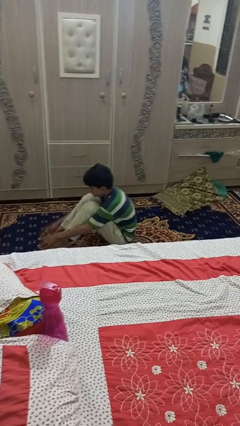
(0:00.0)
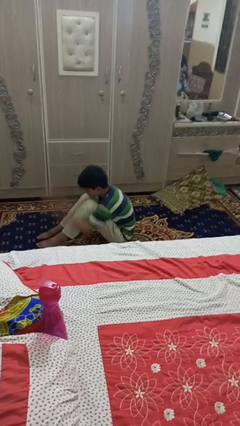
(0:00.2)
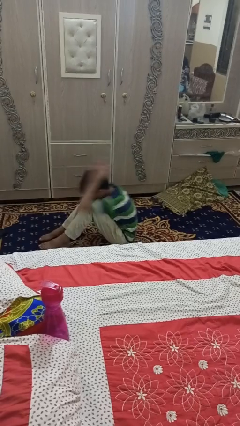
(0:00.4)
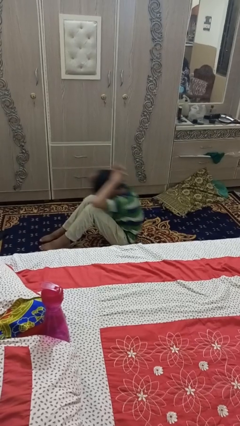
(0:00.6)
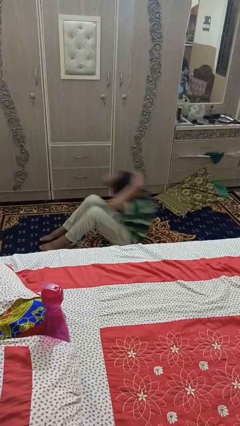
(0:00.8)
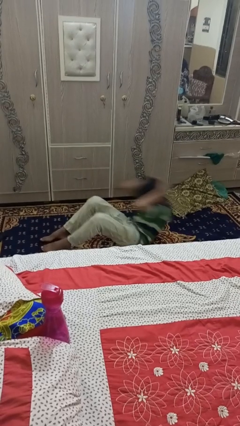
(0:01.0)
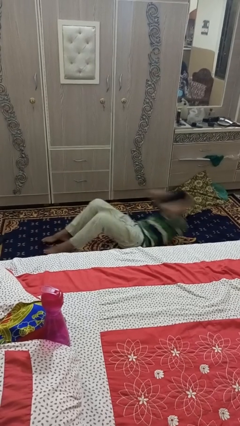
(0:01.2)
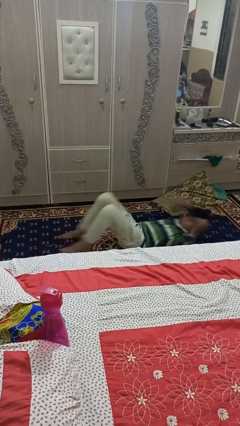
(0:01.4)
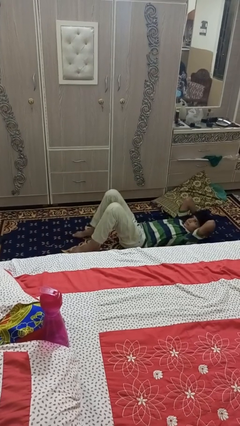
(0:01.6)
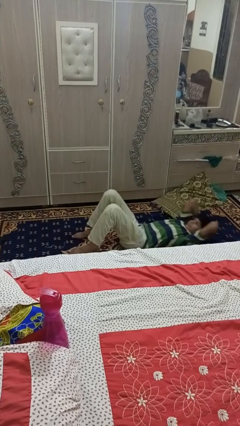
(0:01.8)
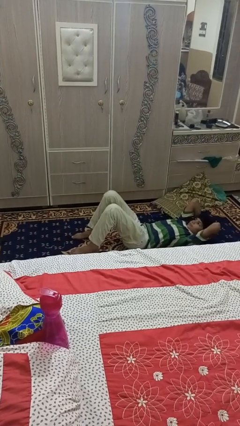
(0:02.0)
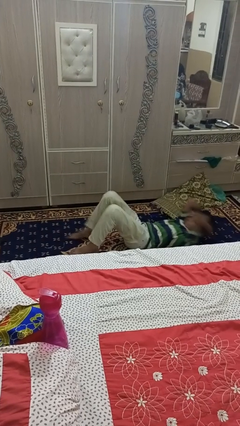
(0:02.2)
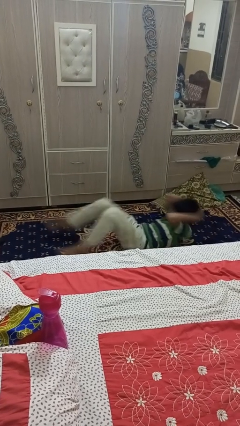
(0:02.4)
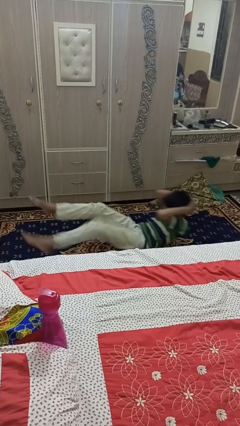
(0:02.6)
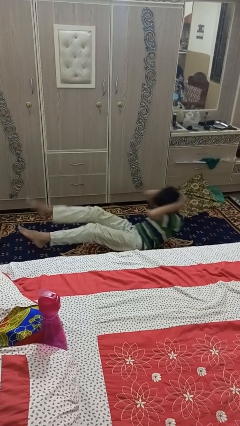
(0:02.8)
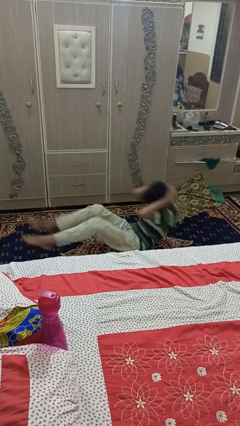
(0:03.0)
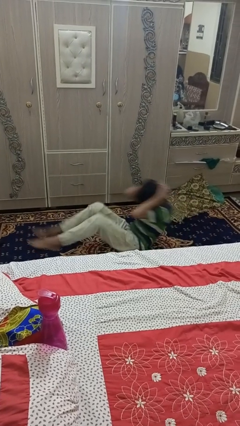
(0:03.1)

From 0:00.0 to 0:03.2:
person exercises with situp

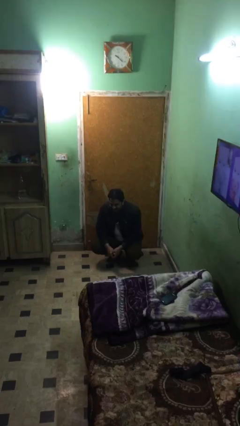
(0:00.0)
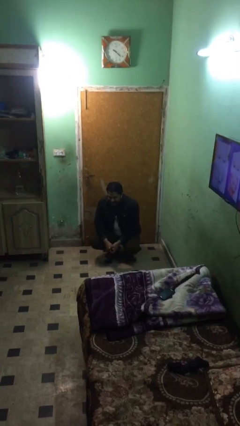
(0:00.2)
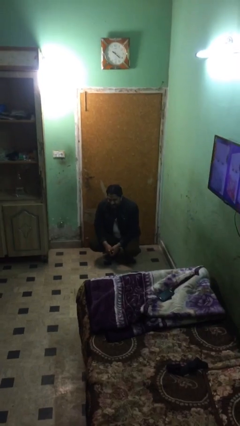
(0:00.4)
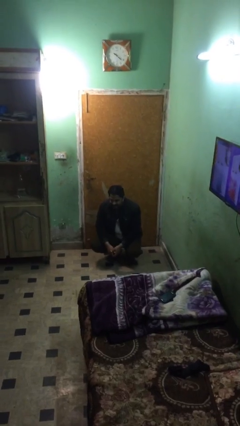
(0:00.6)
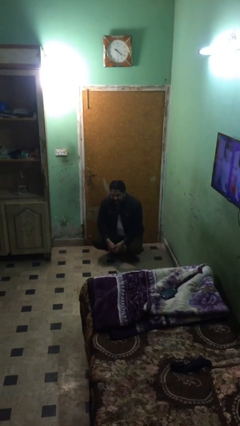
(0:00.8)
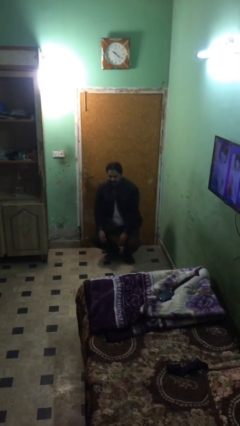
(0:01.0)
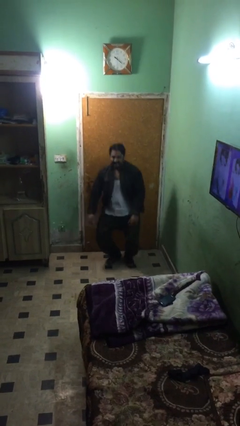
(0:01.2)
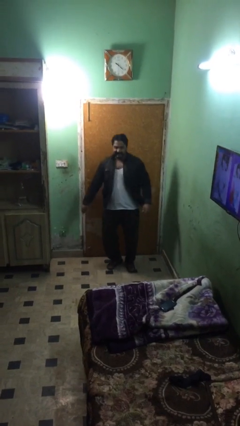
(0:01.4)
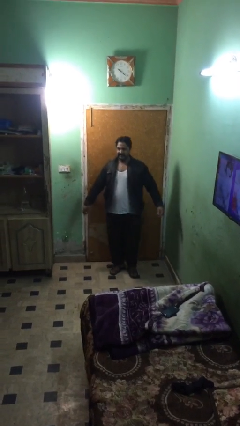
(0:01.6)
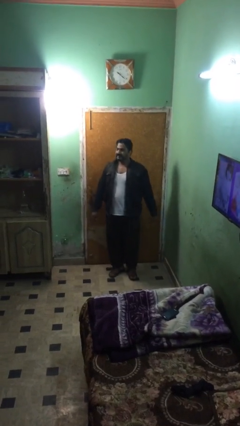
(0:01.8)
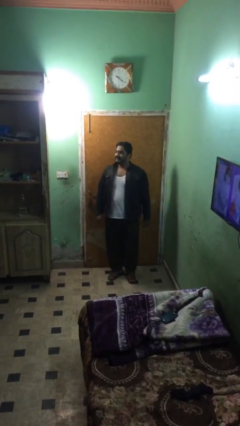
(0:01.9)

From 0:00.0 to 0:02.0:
person stands up

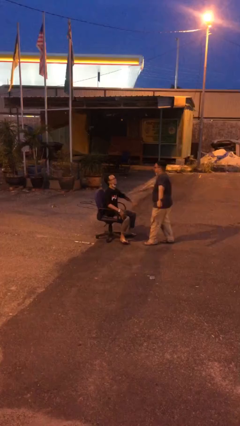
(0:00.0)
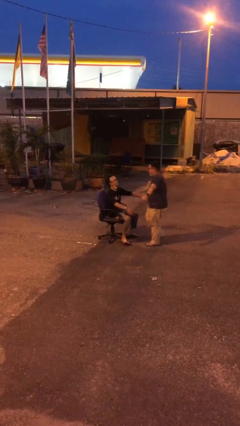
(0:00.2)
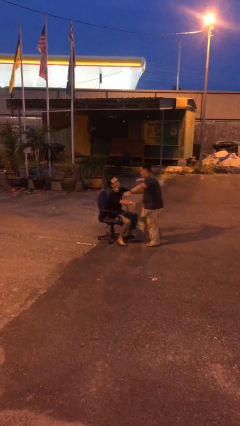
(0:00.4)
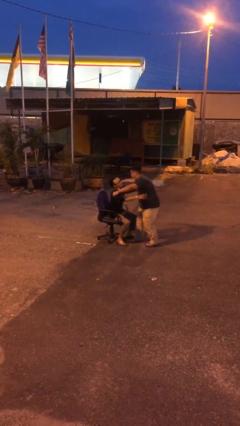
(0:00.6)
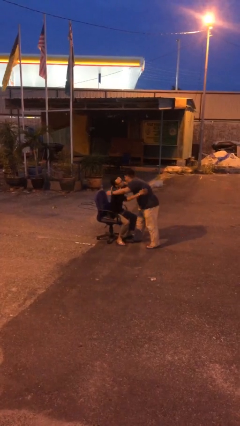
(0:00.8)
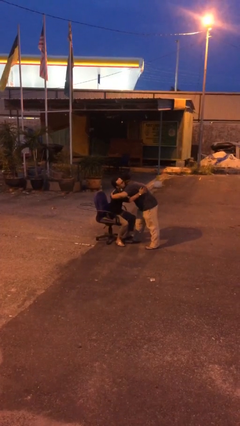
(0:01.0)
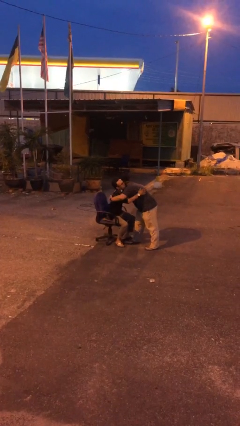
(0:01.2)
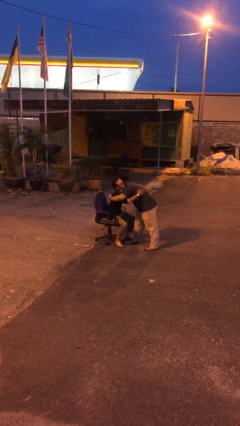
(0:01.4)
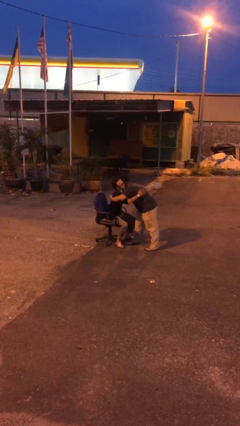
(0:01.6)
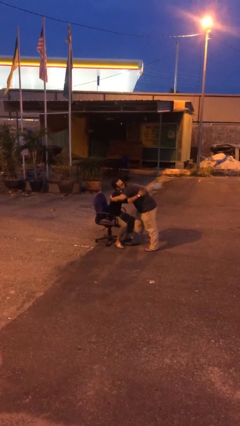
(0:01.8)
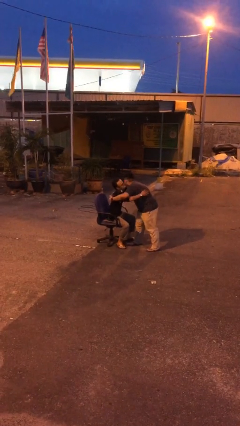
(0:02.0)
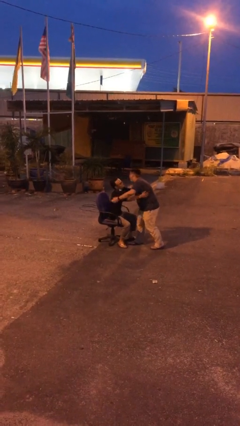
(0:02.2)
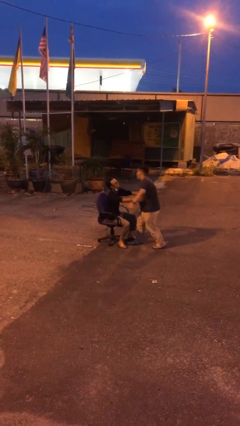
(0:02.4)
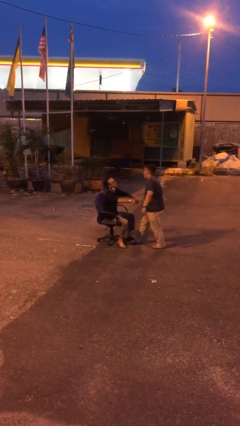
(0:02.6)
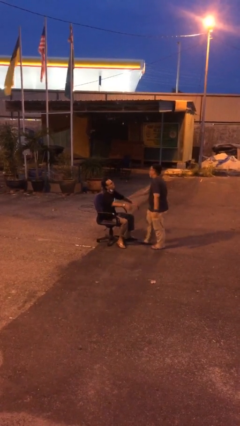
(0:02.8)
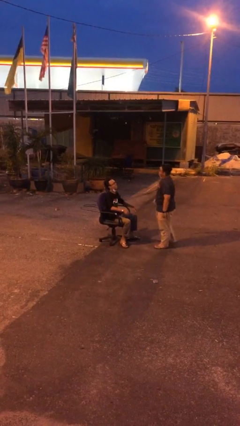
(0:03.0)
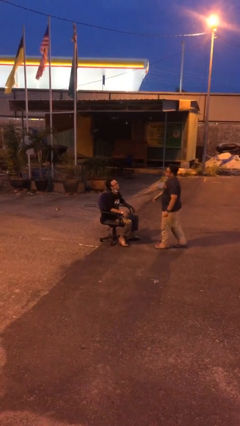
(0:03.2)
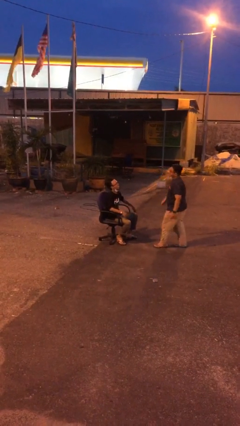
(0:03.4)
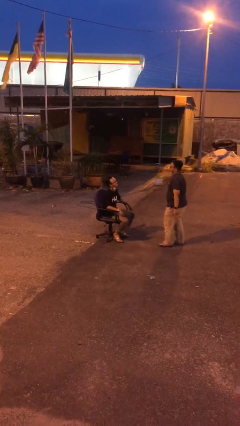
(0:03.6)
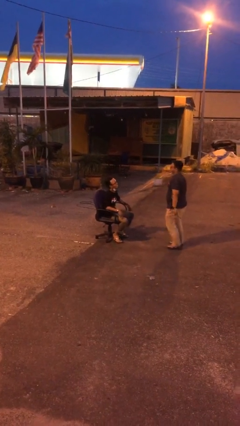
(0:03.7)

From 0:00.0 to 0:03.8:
person embraces person

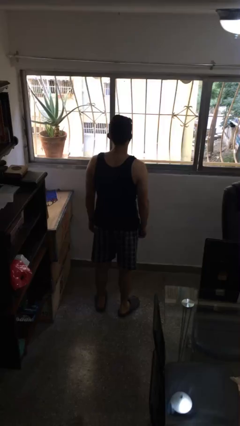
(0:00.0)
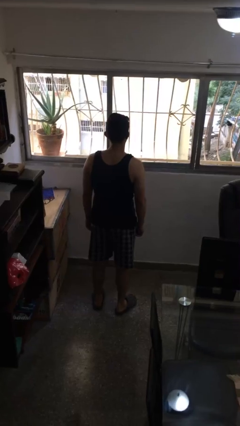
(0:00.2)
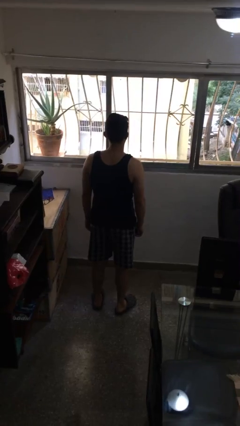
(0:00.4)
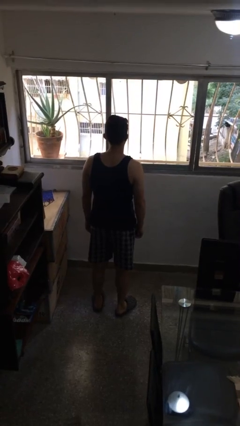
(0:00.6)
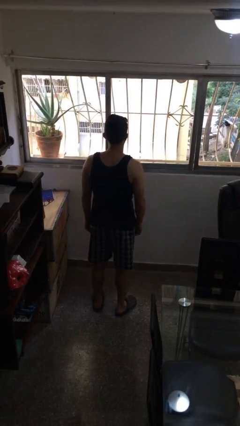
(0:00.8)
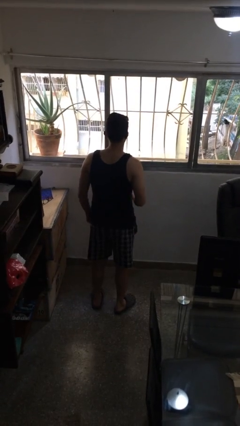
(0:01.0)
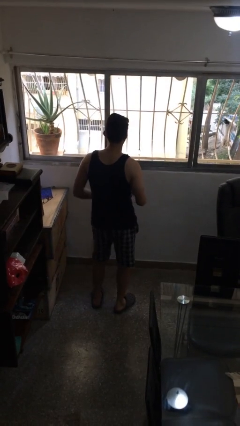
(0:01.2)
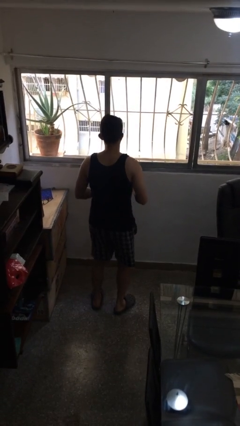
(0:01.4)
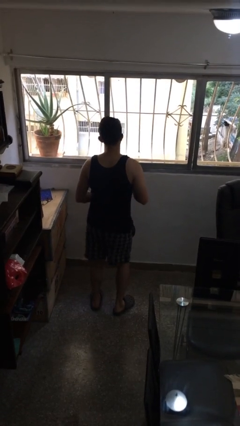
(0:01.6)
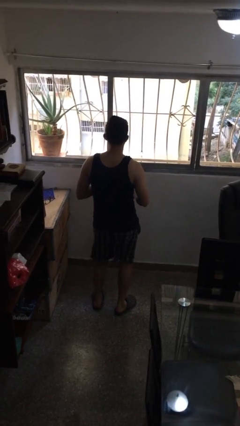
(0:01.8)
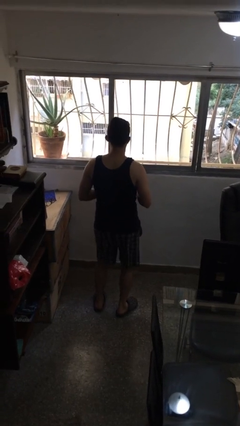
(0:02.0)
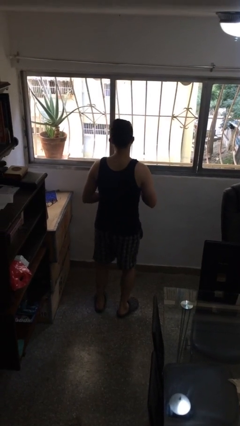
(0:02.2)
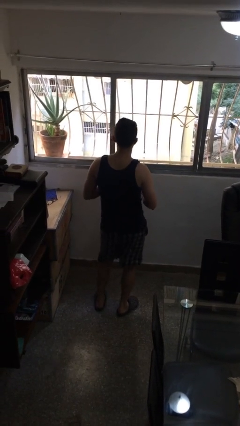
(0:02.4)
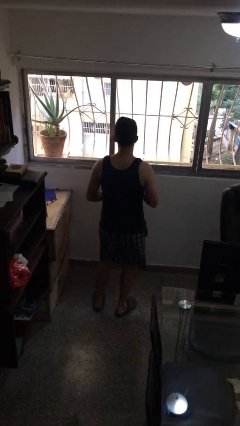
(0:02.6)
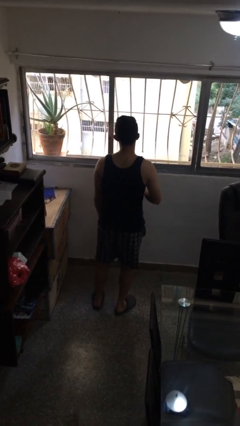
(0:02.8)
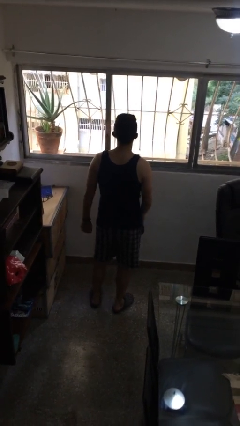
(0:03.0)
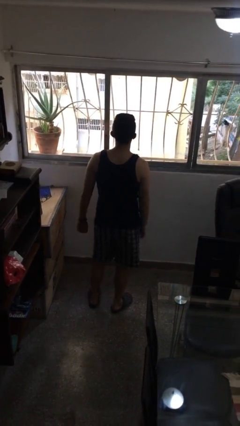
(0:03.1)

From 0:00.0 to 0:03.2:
person dances in place

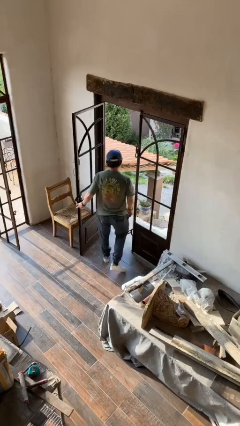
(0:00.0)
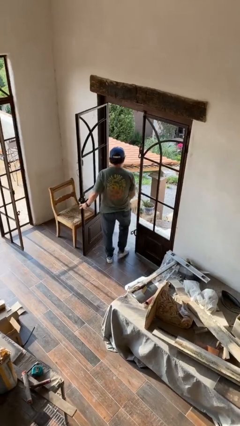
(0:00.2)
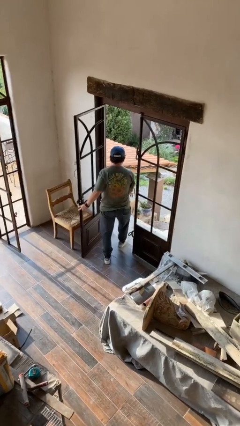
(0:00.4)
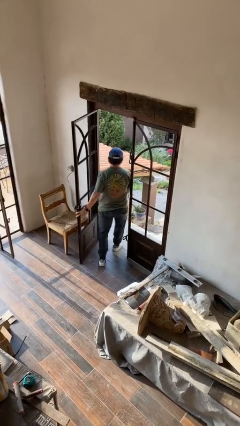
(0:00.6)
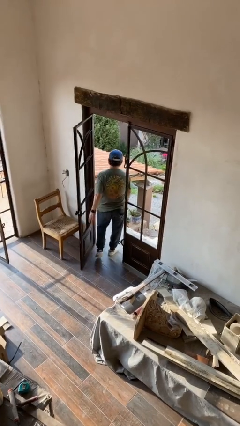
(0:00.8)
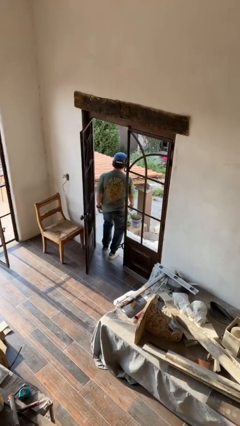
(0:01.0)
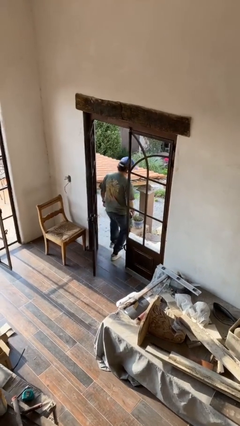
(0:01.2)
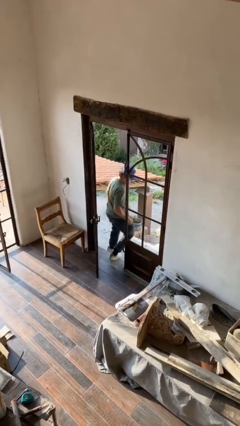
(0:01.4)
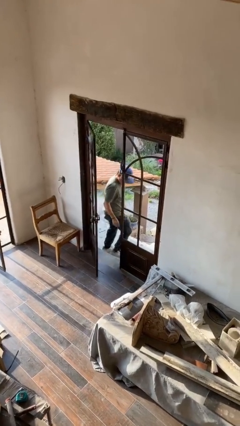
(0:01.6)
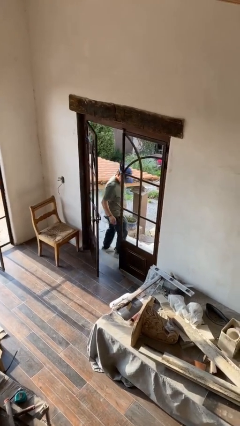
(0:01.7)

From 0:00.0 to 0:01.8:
person exits scene through structure

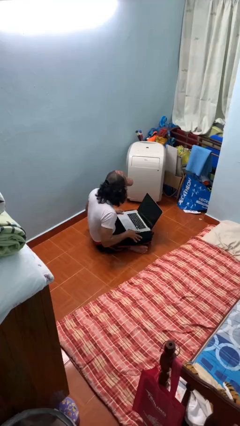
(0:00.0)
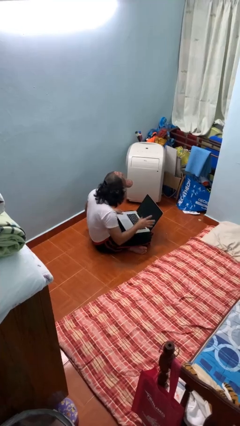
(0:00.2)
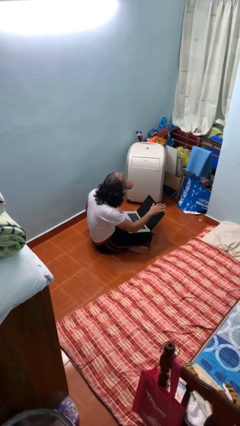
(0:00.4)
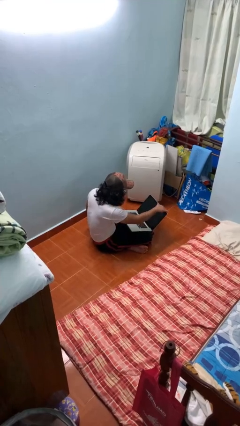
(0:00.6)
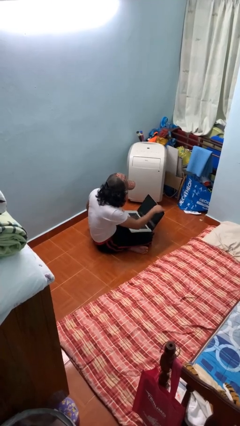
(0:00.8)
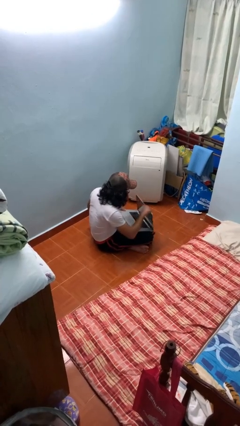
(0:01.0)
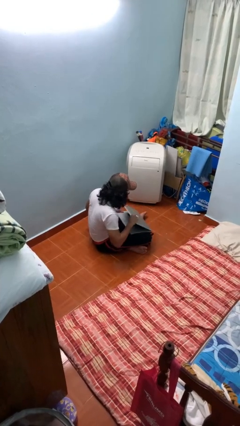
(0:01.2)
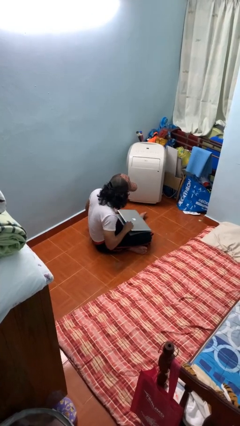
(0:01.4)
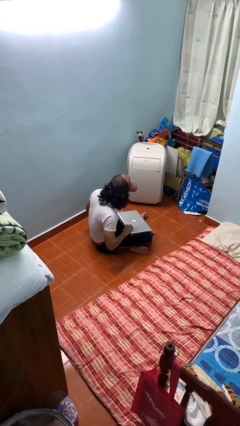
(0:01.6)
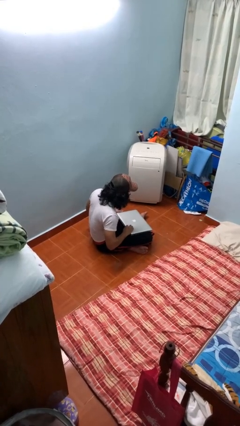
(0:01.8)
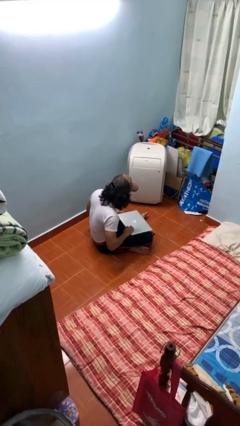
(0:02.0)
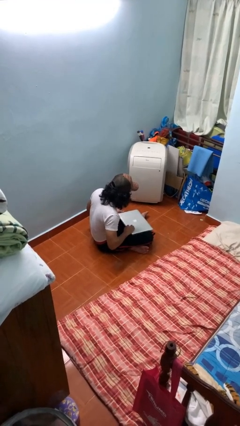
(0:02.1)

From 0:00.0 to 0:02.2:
person closes laptop

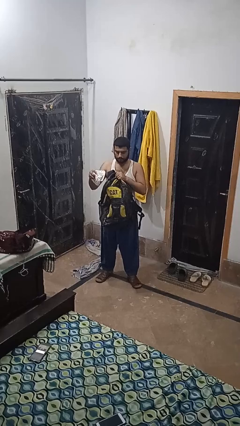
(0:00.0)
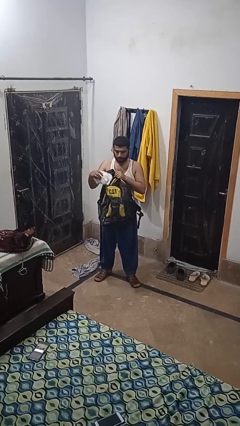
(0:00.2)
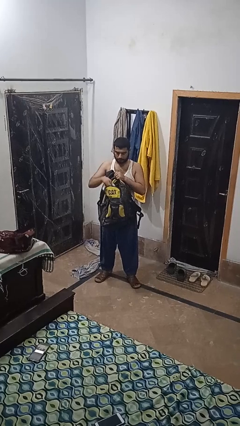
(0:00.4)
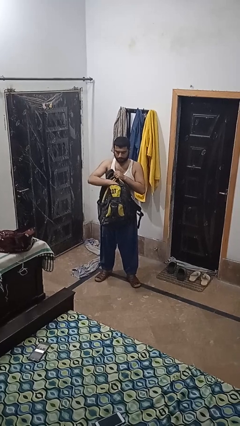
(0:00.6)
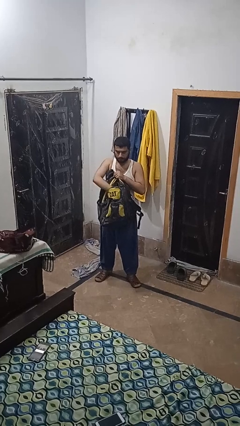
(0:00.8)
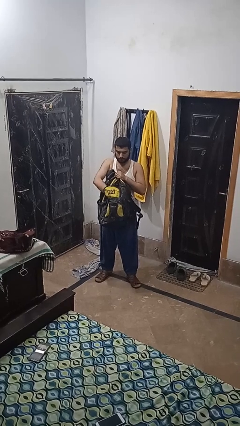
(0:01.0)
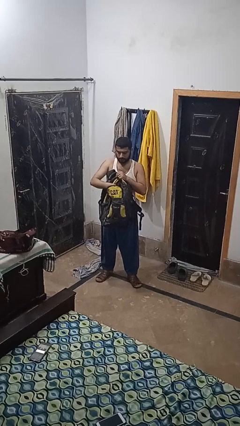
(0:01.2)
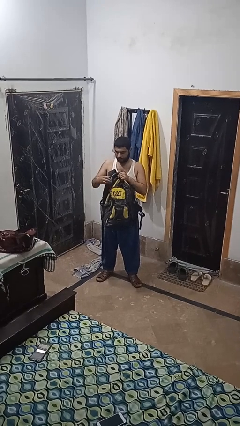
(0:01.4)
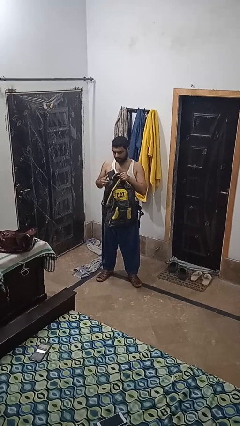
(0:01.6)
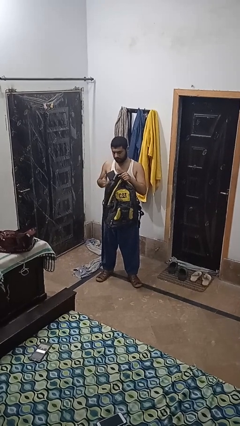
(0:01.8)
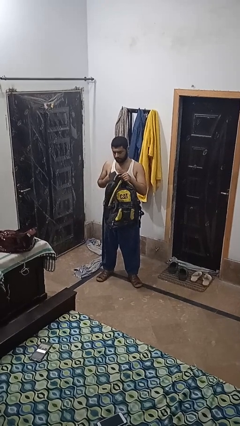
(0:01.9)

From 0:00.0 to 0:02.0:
person puts object into backpack